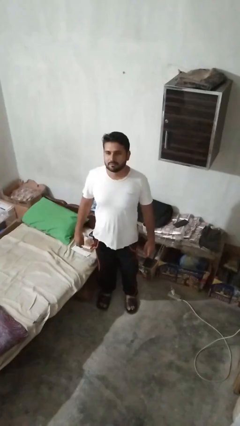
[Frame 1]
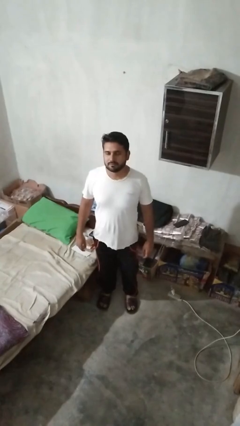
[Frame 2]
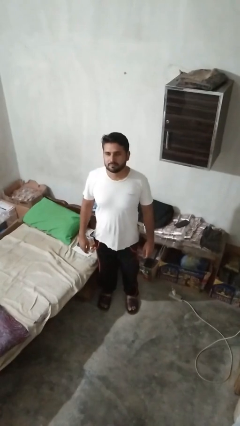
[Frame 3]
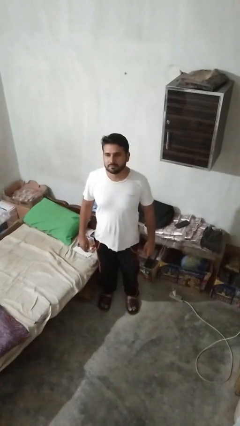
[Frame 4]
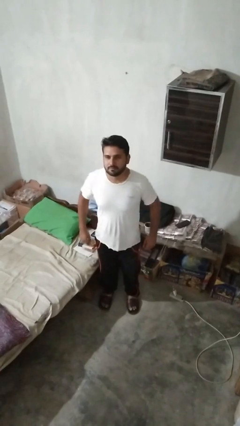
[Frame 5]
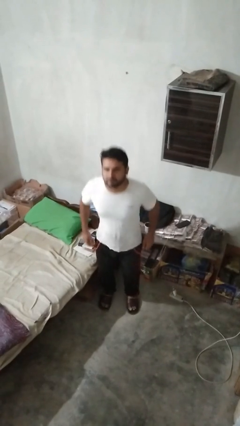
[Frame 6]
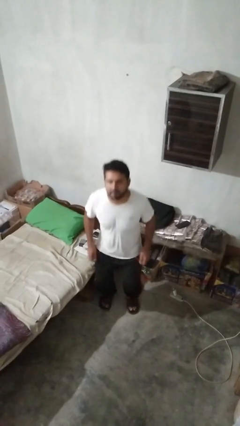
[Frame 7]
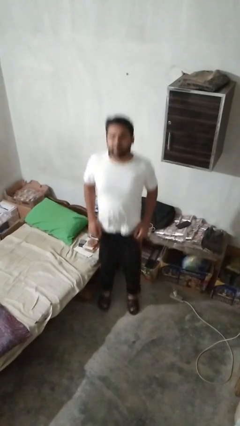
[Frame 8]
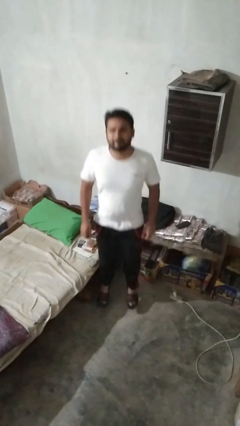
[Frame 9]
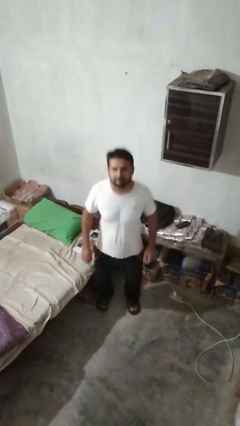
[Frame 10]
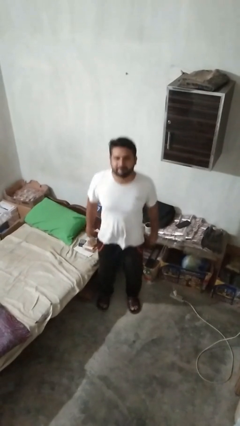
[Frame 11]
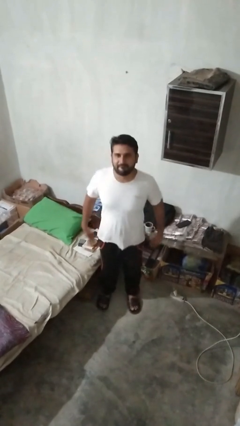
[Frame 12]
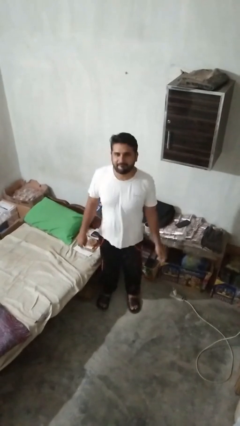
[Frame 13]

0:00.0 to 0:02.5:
person jumps

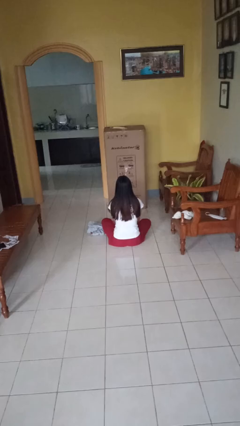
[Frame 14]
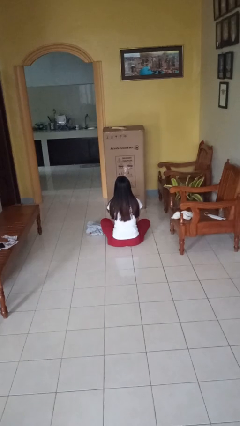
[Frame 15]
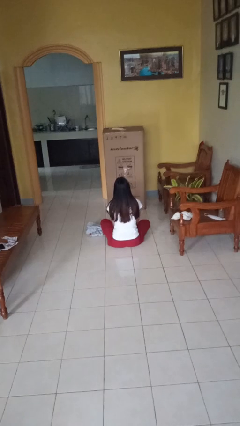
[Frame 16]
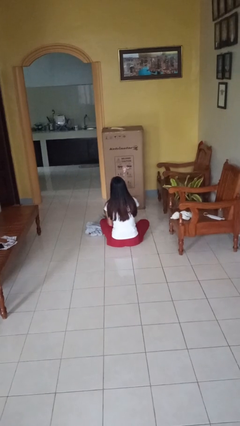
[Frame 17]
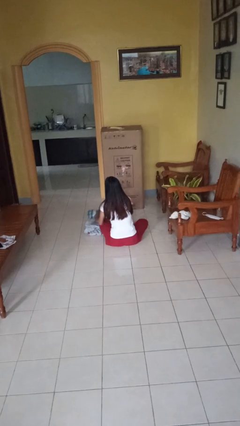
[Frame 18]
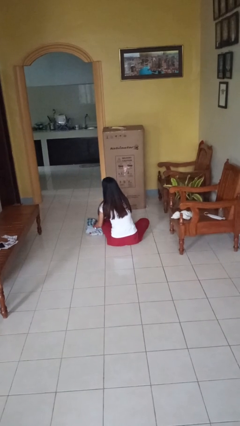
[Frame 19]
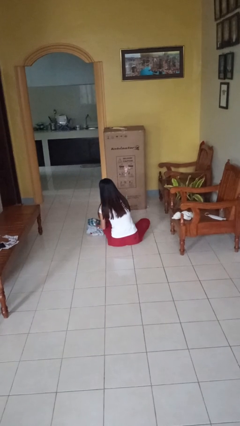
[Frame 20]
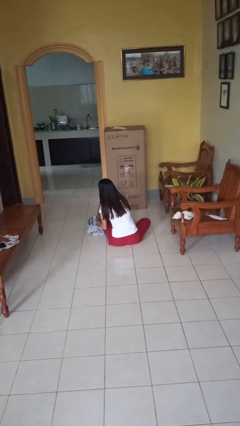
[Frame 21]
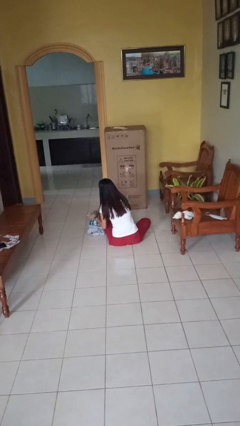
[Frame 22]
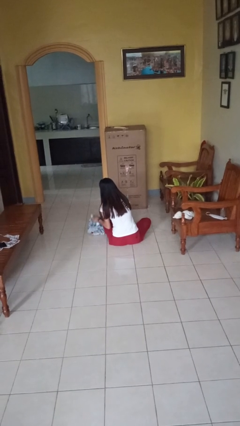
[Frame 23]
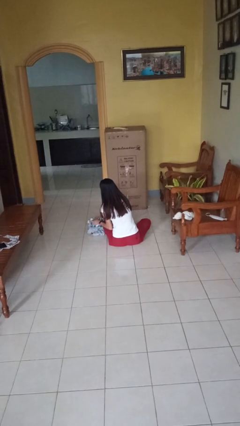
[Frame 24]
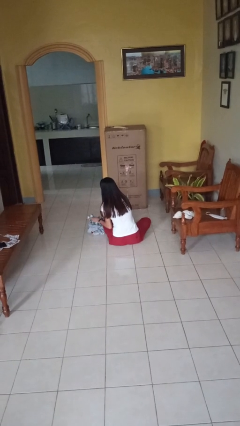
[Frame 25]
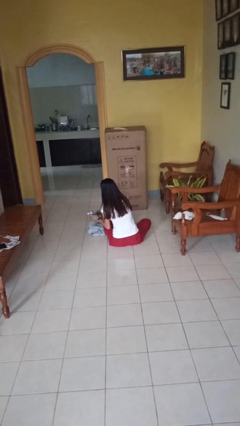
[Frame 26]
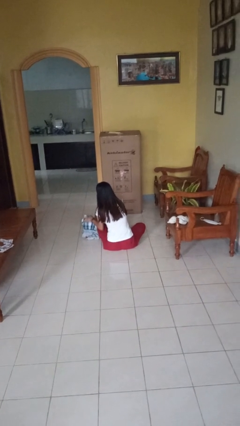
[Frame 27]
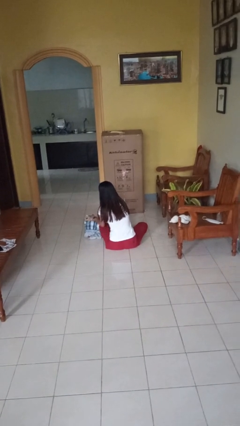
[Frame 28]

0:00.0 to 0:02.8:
person folds towel

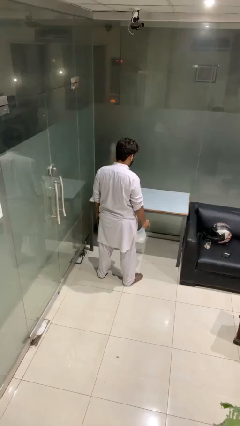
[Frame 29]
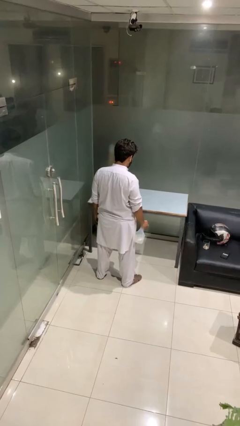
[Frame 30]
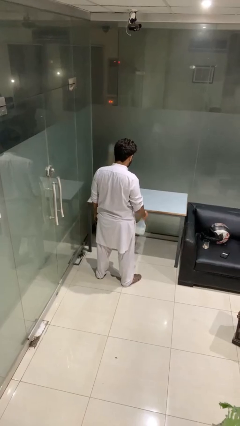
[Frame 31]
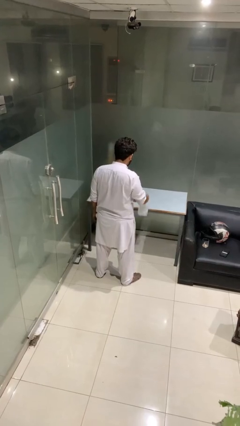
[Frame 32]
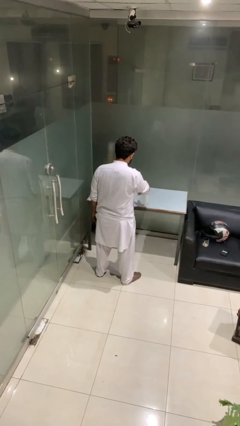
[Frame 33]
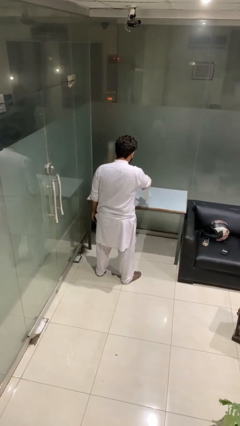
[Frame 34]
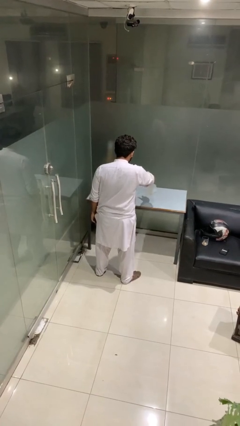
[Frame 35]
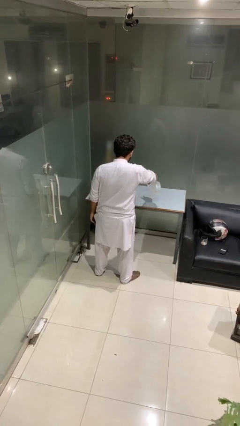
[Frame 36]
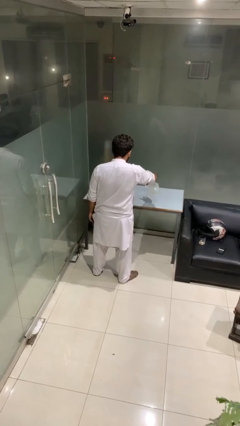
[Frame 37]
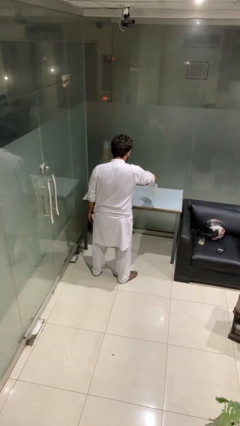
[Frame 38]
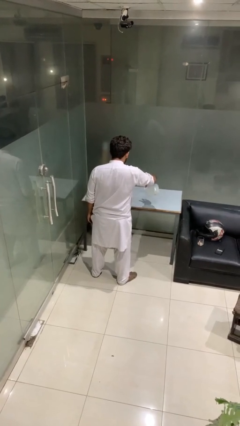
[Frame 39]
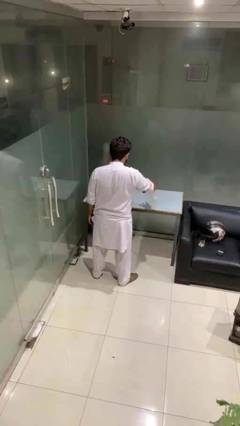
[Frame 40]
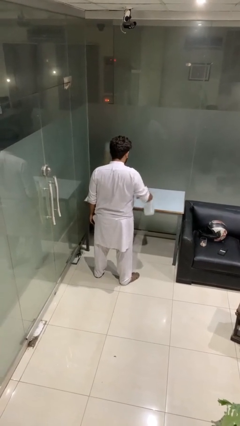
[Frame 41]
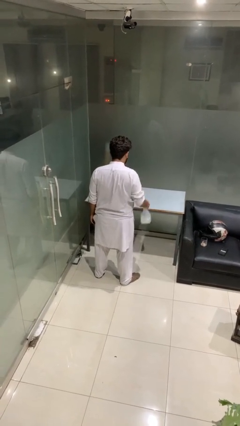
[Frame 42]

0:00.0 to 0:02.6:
person sprays from bottle

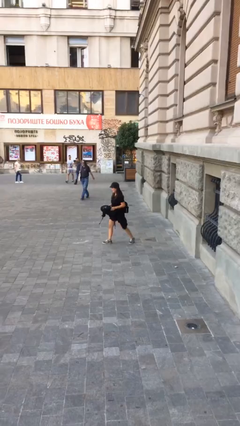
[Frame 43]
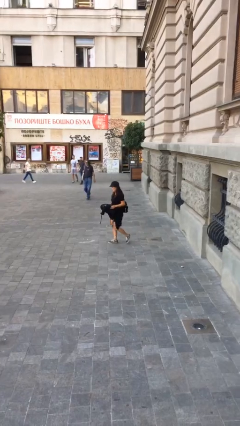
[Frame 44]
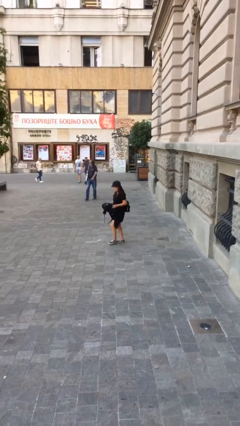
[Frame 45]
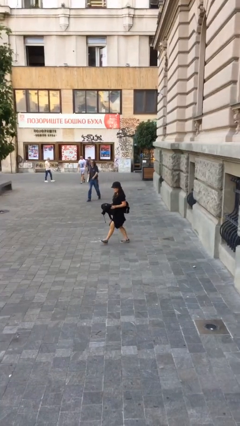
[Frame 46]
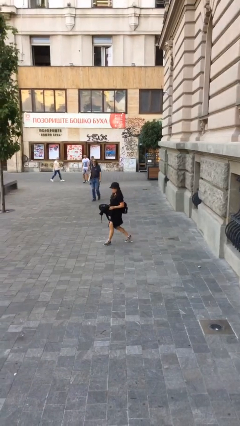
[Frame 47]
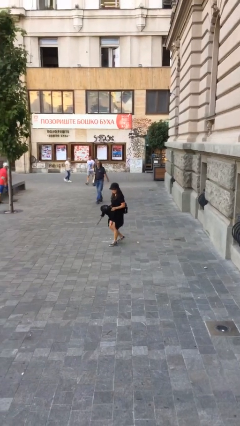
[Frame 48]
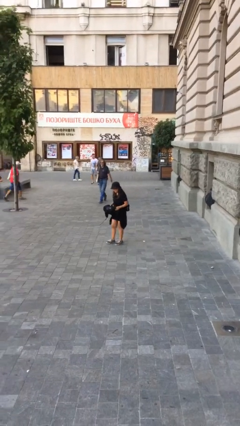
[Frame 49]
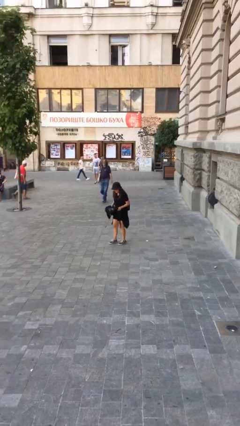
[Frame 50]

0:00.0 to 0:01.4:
person carries heavy object

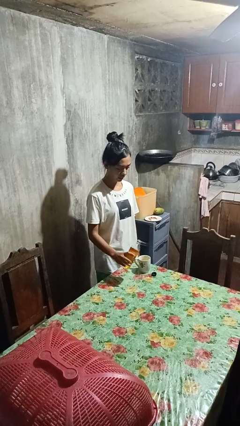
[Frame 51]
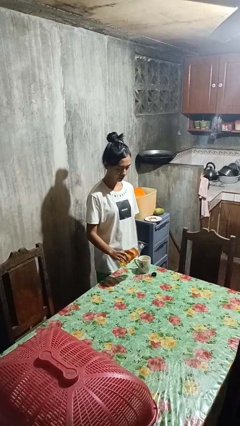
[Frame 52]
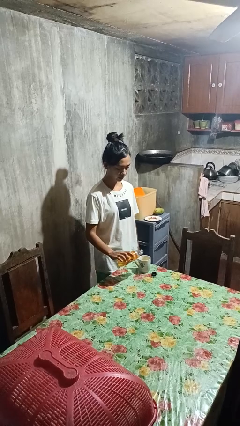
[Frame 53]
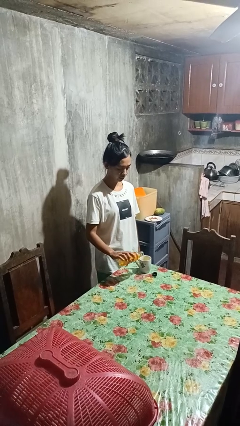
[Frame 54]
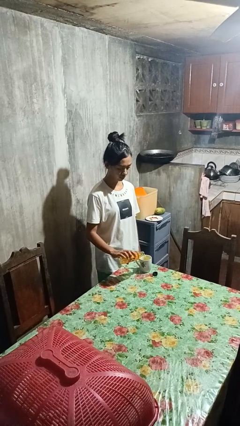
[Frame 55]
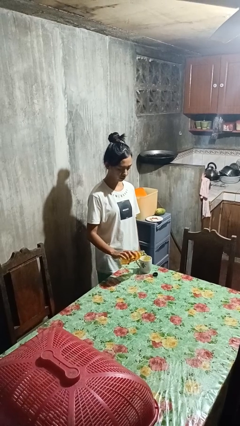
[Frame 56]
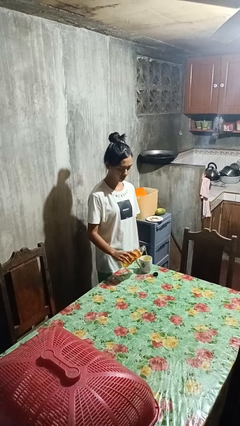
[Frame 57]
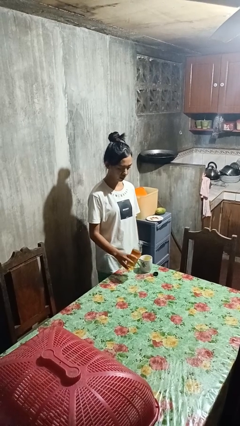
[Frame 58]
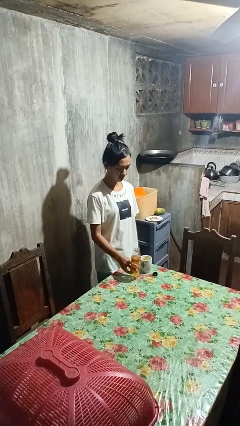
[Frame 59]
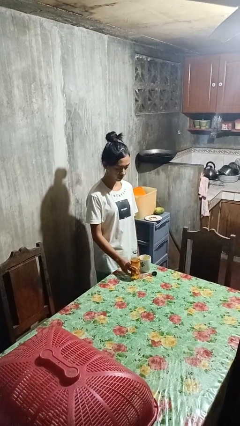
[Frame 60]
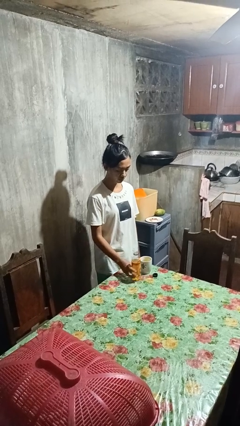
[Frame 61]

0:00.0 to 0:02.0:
person pours liquid into cup

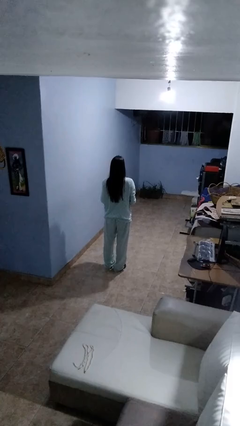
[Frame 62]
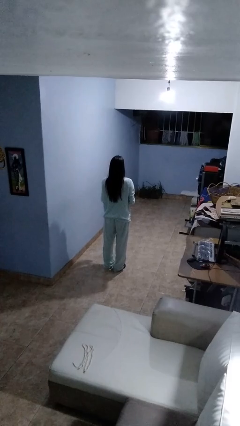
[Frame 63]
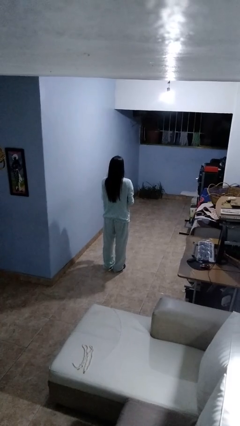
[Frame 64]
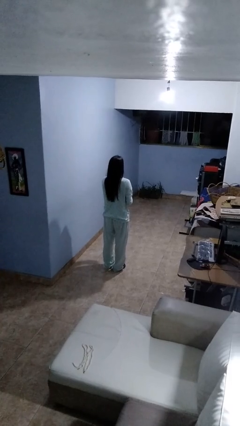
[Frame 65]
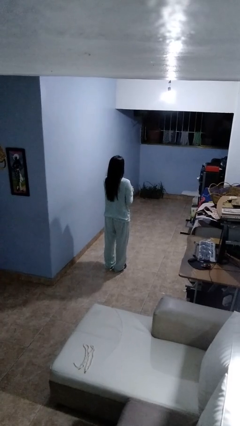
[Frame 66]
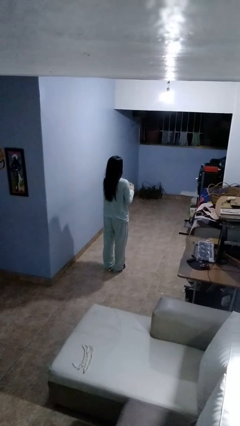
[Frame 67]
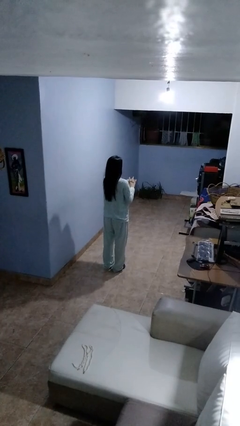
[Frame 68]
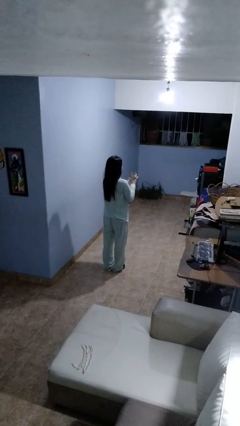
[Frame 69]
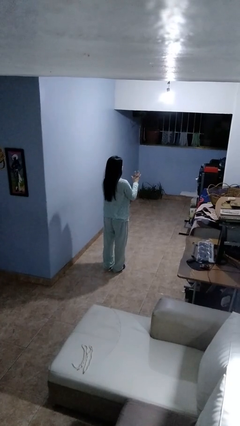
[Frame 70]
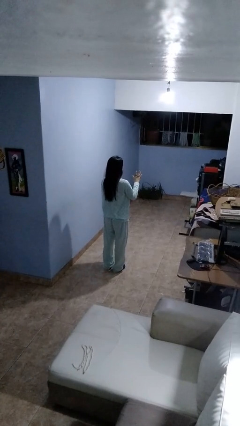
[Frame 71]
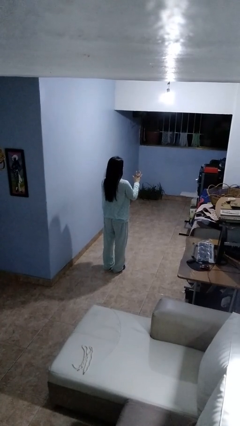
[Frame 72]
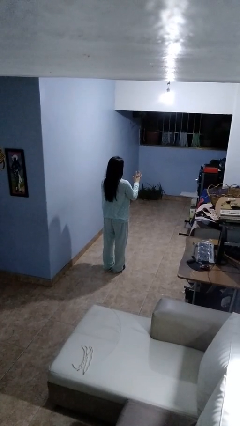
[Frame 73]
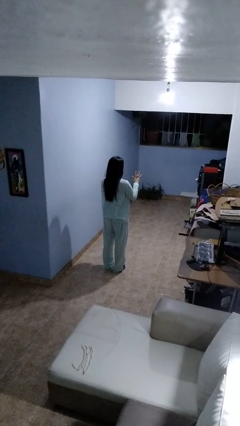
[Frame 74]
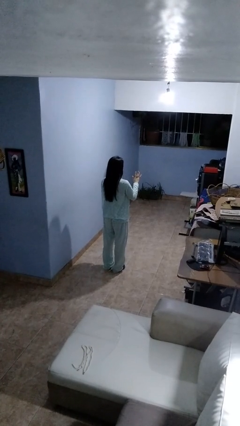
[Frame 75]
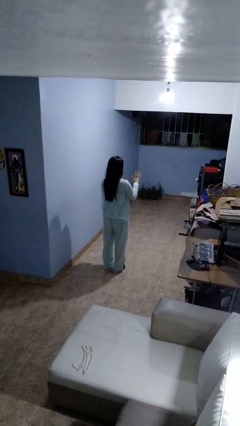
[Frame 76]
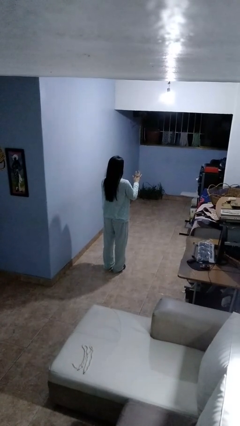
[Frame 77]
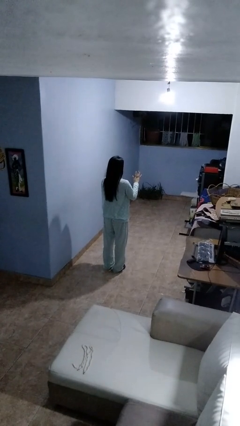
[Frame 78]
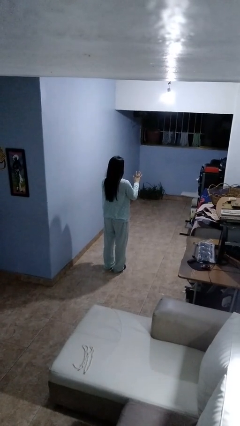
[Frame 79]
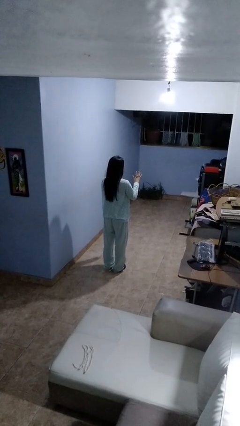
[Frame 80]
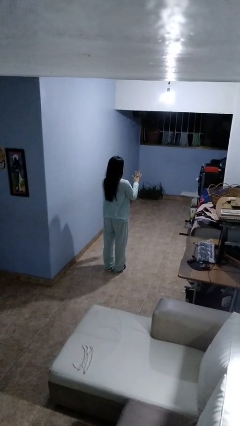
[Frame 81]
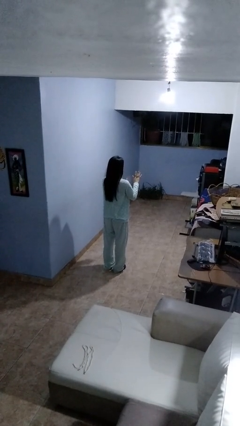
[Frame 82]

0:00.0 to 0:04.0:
person puts on ring

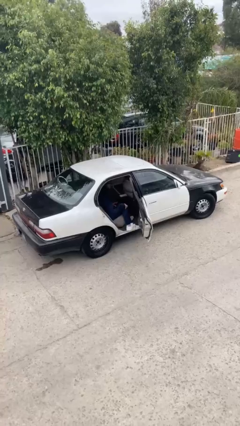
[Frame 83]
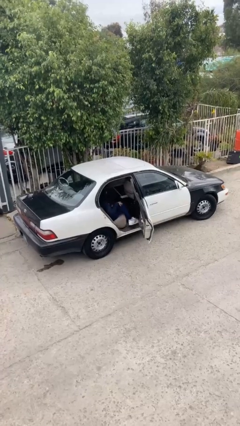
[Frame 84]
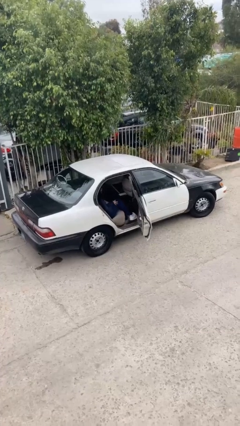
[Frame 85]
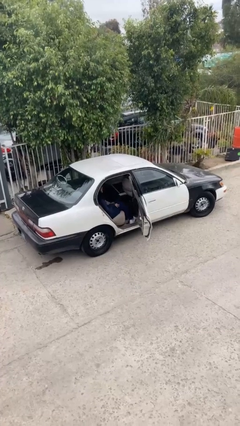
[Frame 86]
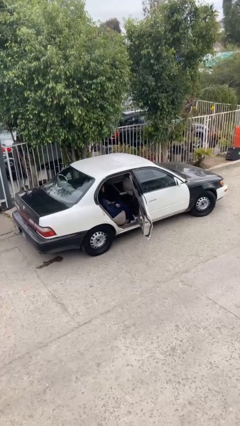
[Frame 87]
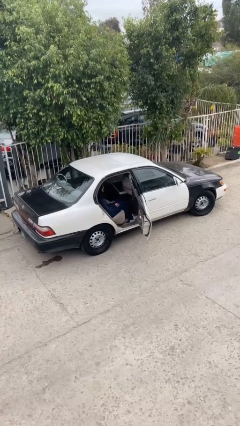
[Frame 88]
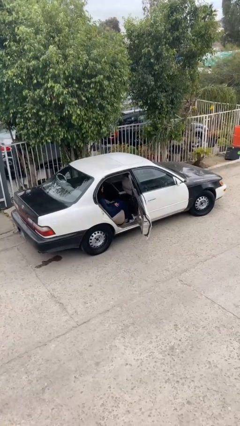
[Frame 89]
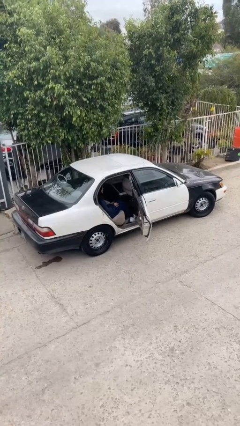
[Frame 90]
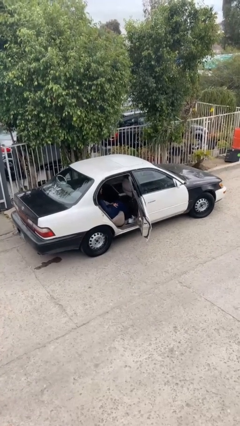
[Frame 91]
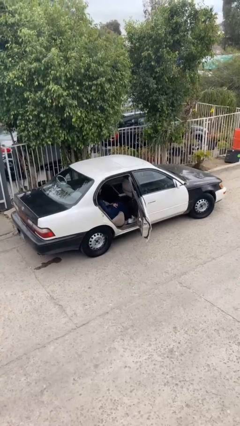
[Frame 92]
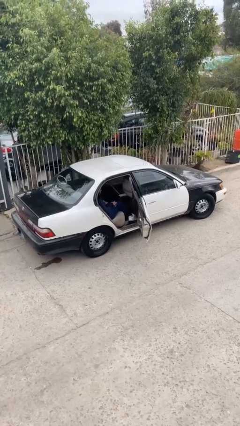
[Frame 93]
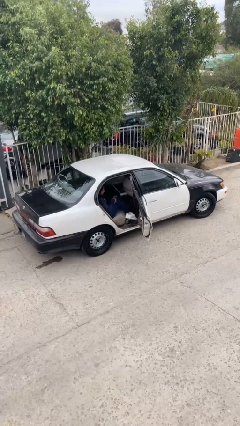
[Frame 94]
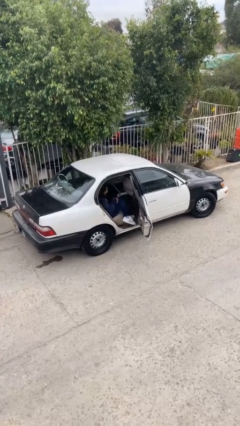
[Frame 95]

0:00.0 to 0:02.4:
person enters car
